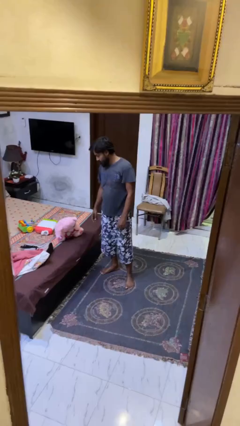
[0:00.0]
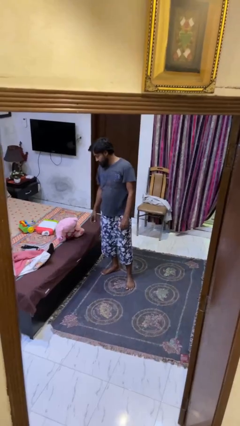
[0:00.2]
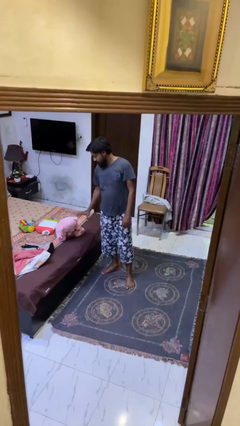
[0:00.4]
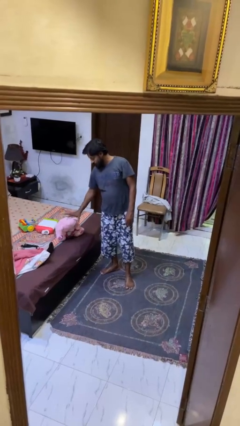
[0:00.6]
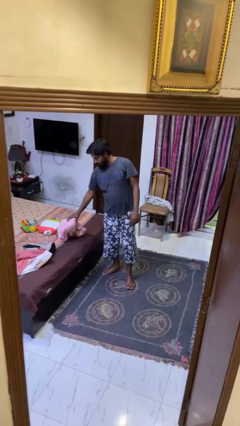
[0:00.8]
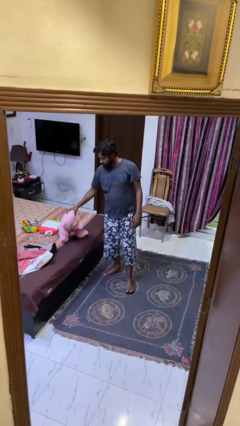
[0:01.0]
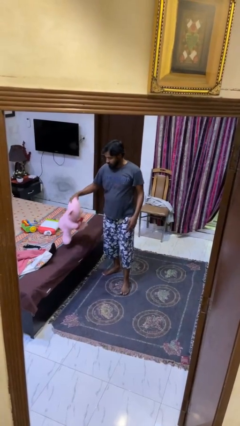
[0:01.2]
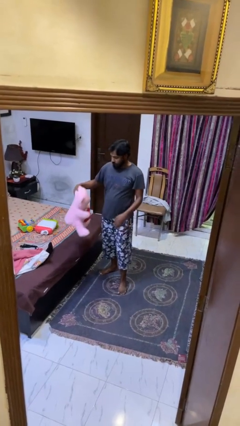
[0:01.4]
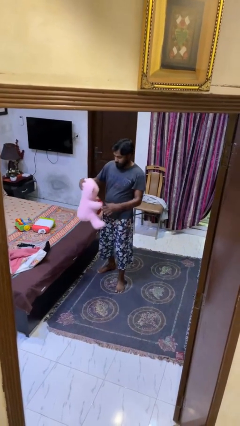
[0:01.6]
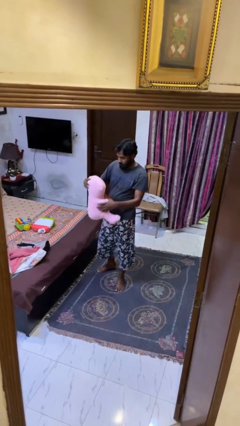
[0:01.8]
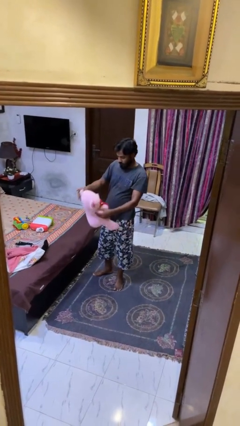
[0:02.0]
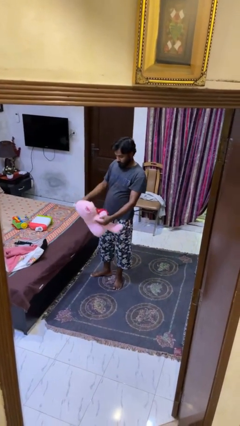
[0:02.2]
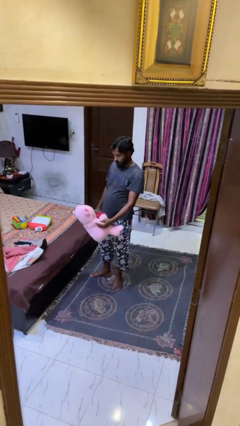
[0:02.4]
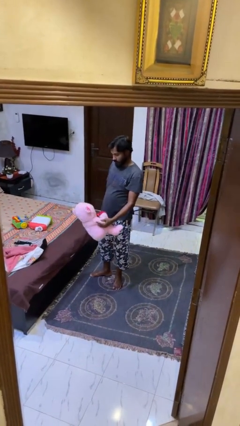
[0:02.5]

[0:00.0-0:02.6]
person picks up object from bed

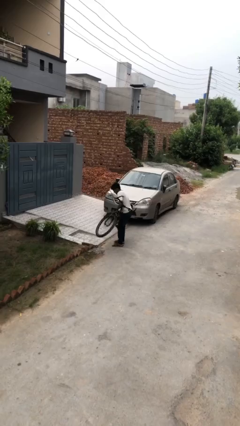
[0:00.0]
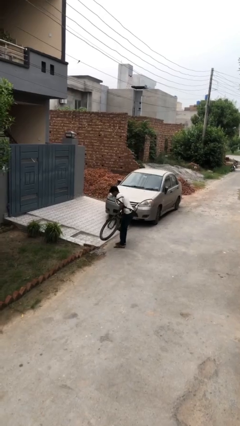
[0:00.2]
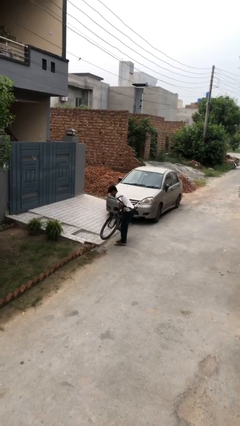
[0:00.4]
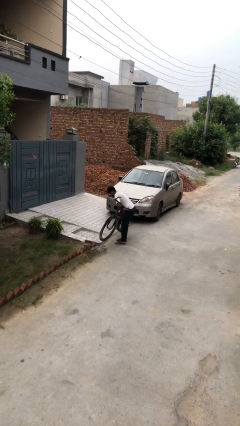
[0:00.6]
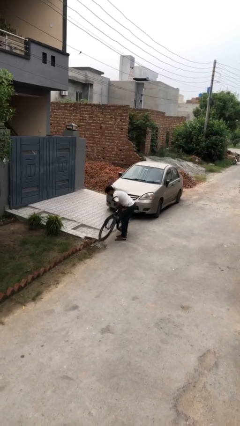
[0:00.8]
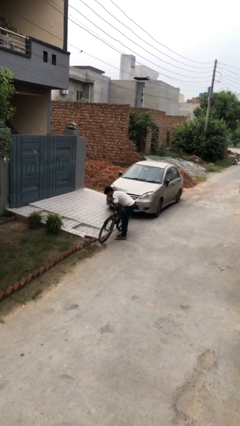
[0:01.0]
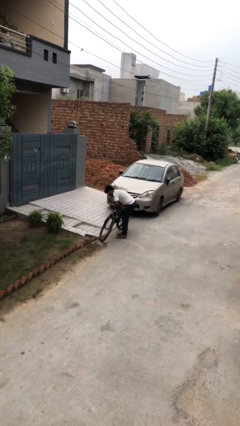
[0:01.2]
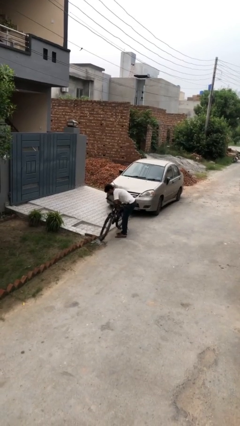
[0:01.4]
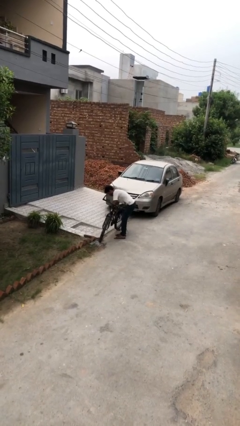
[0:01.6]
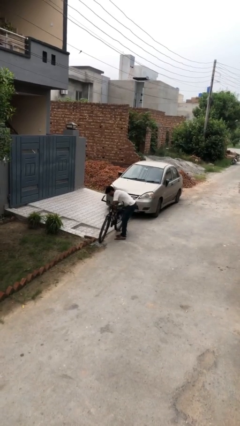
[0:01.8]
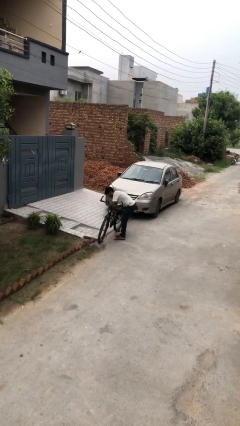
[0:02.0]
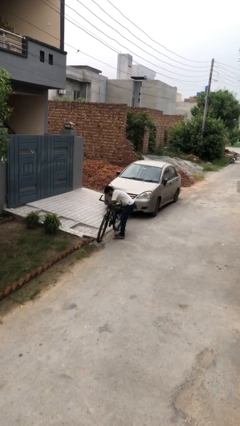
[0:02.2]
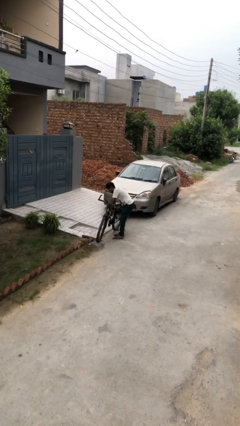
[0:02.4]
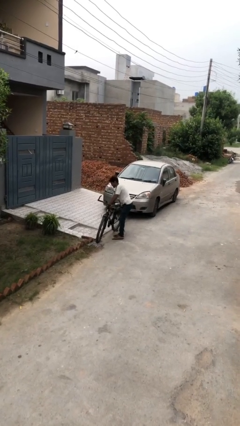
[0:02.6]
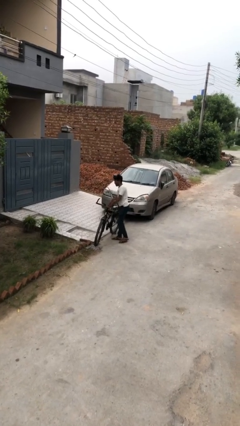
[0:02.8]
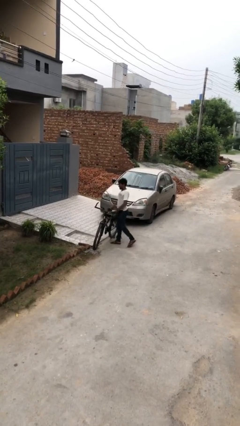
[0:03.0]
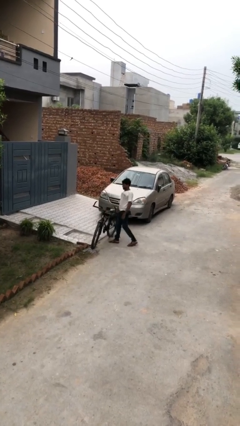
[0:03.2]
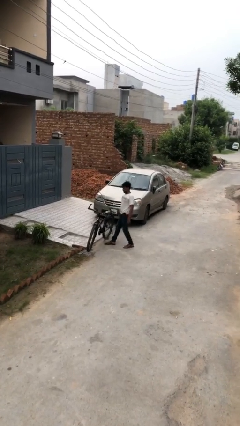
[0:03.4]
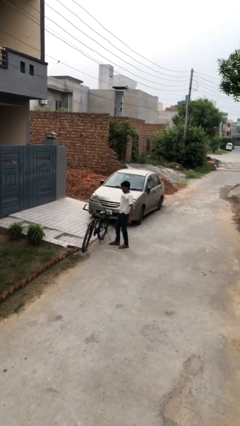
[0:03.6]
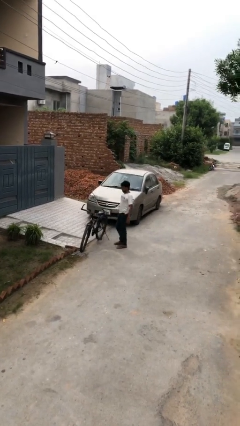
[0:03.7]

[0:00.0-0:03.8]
person puts down object on floor

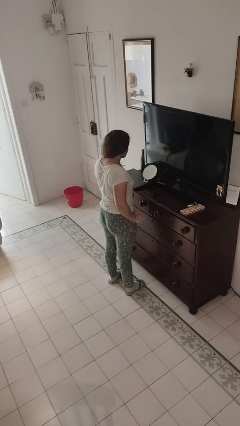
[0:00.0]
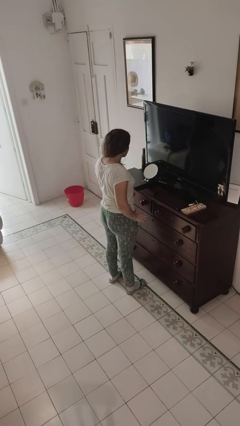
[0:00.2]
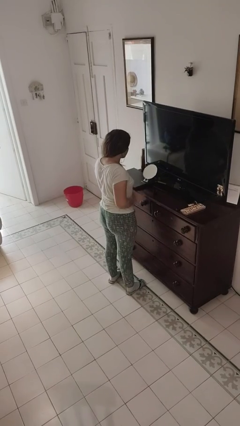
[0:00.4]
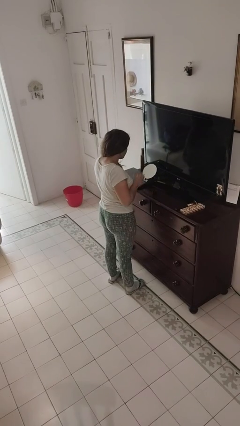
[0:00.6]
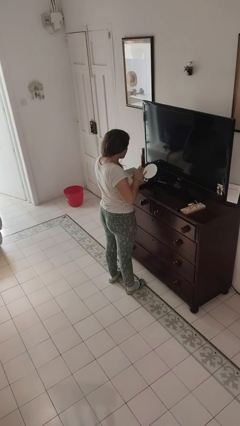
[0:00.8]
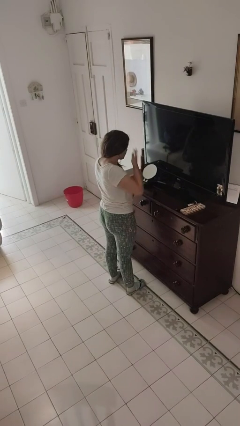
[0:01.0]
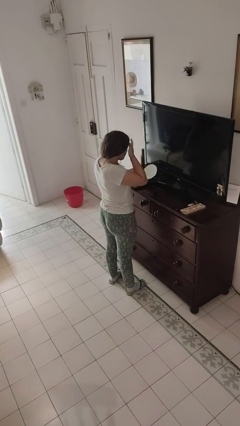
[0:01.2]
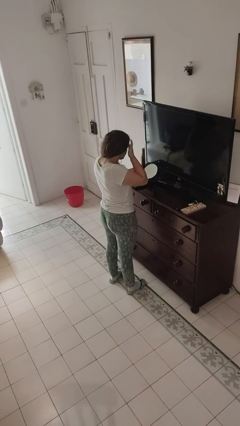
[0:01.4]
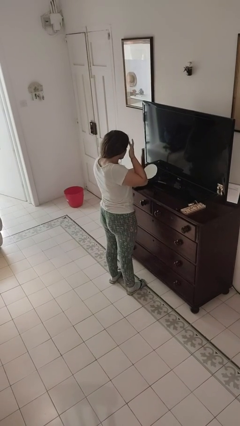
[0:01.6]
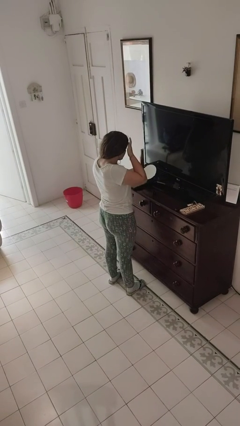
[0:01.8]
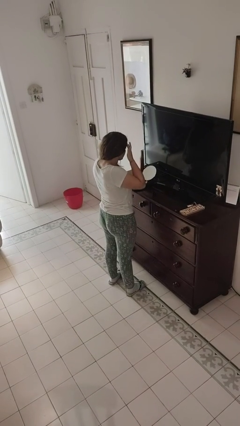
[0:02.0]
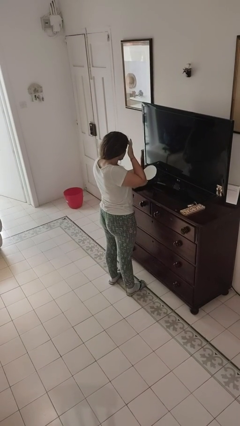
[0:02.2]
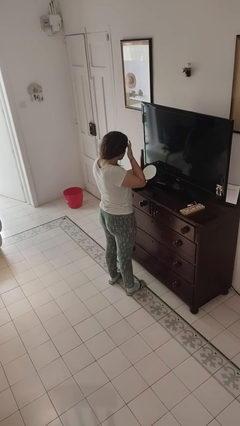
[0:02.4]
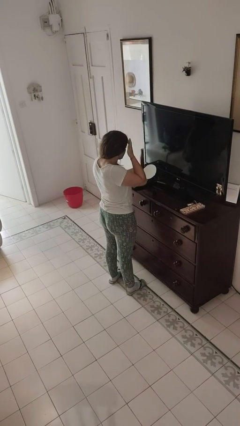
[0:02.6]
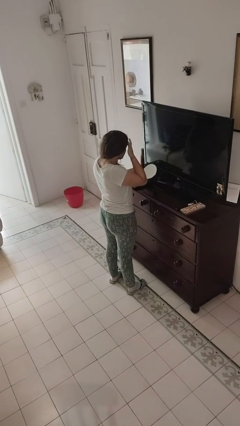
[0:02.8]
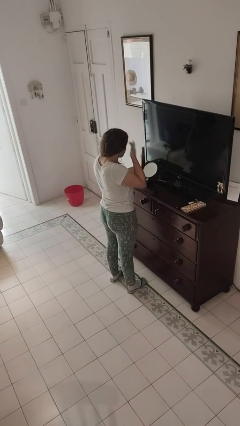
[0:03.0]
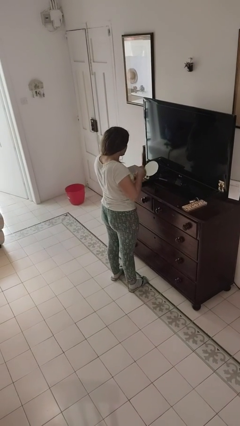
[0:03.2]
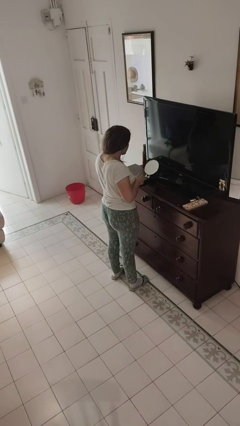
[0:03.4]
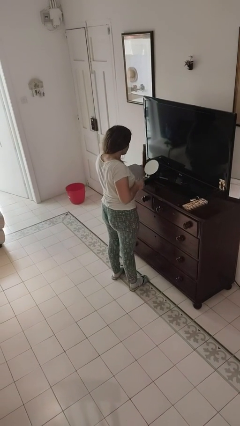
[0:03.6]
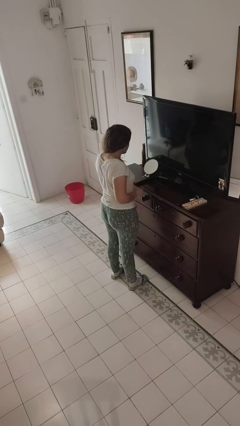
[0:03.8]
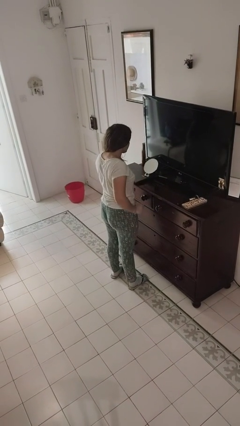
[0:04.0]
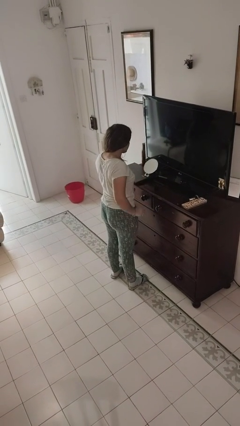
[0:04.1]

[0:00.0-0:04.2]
person applies foundation makeup

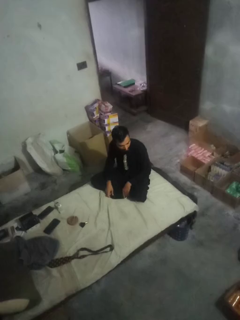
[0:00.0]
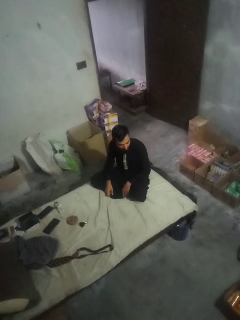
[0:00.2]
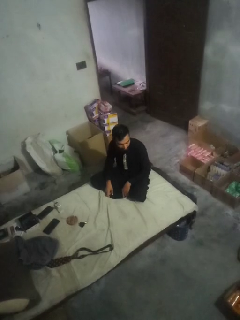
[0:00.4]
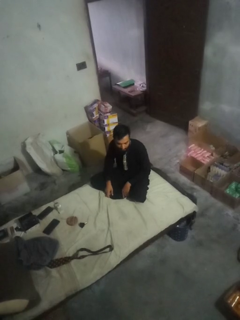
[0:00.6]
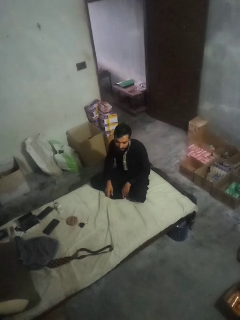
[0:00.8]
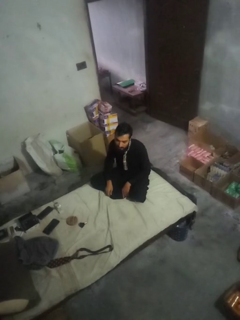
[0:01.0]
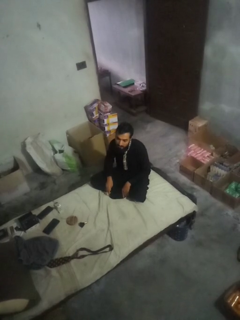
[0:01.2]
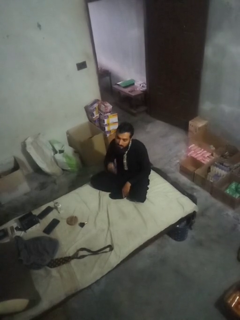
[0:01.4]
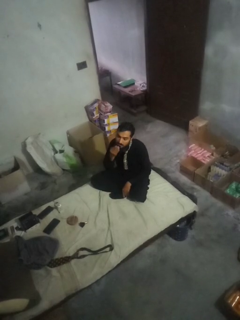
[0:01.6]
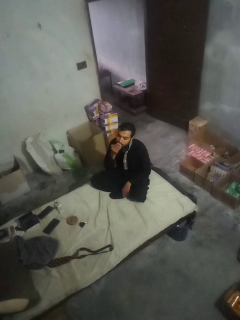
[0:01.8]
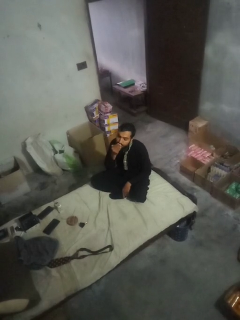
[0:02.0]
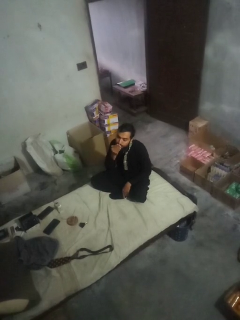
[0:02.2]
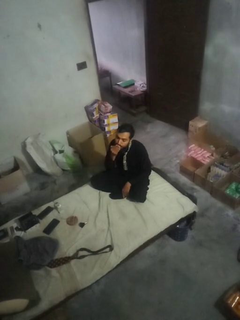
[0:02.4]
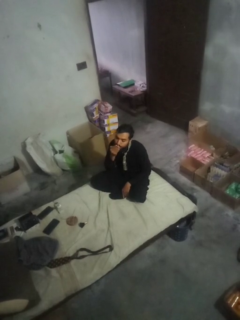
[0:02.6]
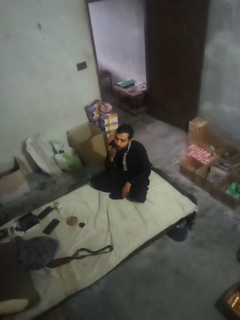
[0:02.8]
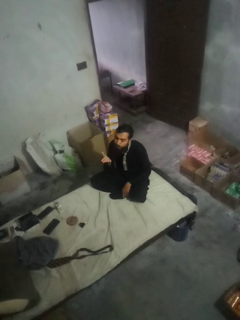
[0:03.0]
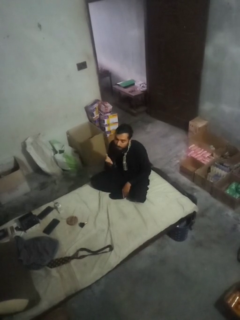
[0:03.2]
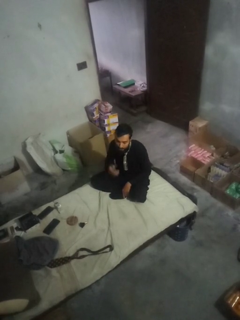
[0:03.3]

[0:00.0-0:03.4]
person gestures blow kiss

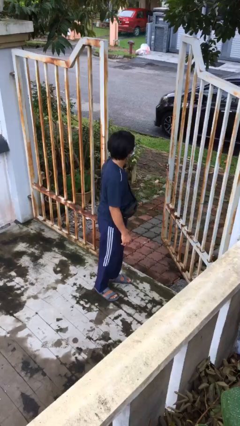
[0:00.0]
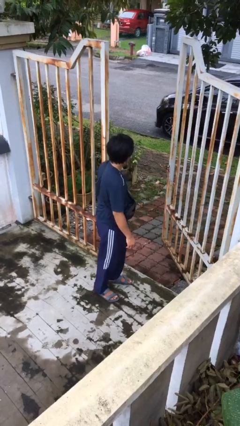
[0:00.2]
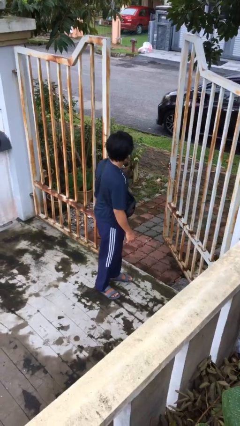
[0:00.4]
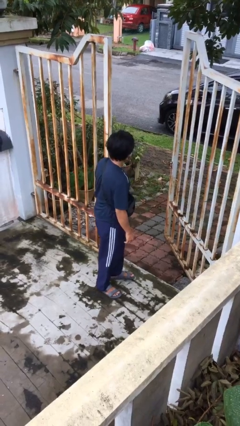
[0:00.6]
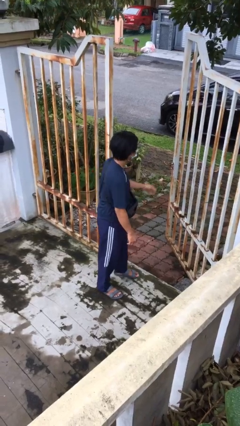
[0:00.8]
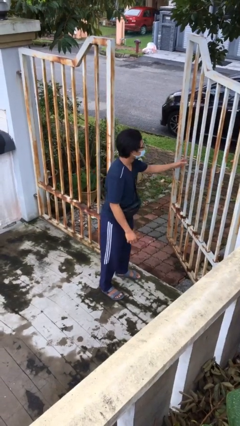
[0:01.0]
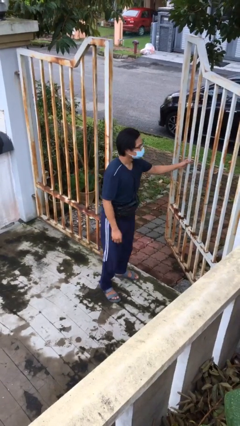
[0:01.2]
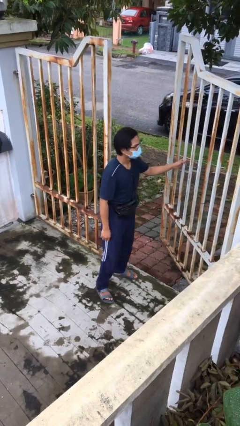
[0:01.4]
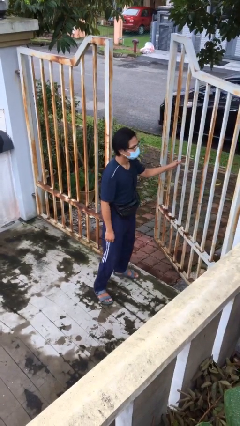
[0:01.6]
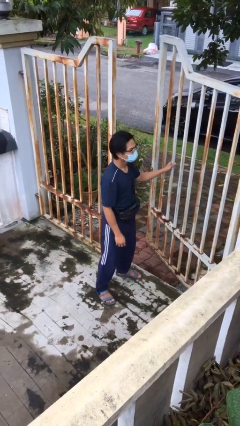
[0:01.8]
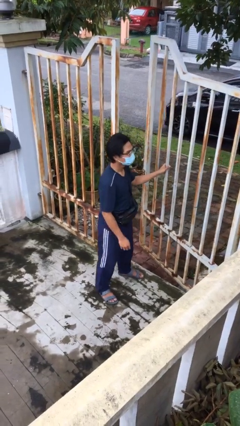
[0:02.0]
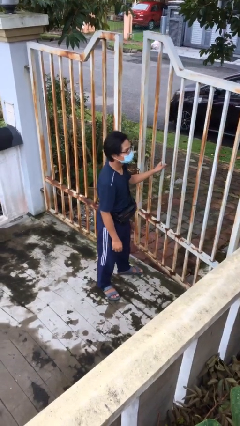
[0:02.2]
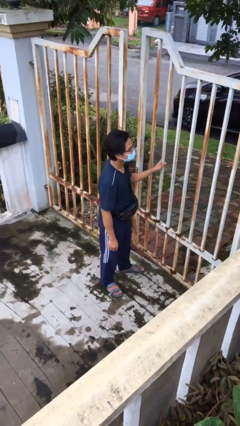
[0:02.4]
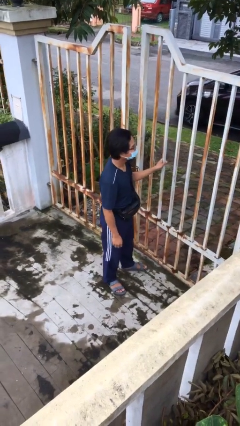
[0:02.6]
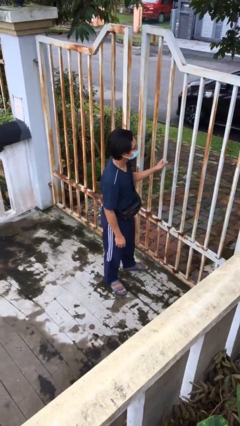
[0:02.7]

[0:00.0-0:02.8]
person closes facility door

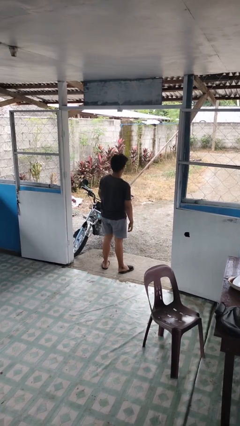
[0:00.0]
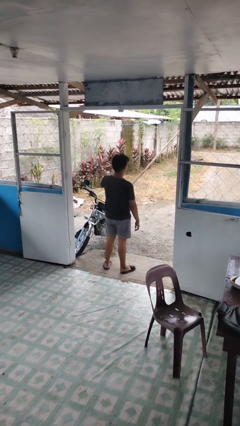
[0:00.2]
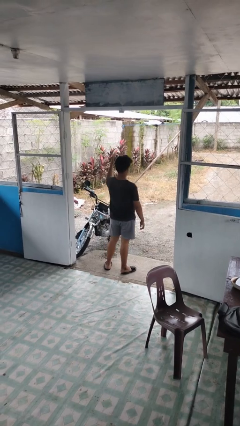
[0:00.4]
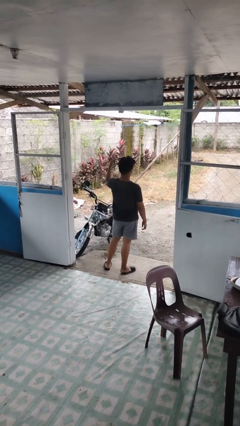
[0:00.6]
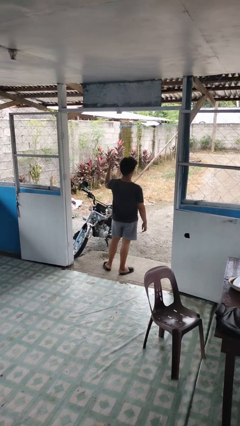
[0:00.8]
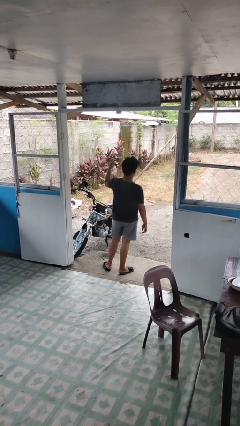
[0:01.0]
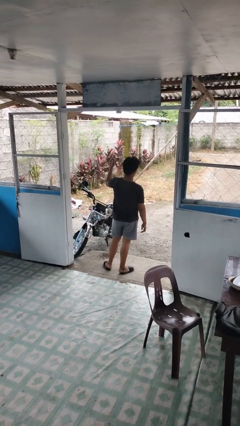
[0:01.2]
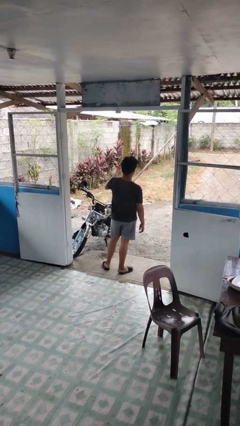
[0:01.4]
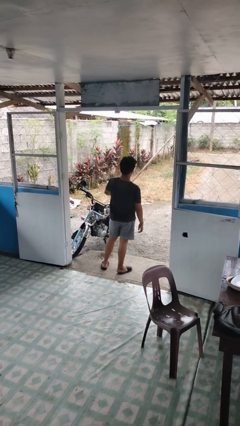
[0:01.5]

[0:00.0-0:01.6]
person gestures thumbs up
